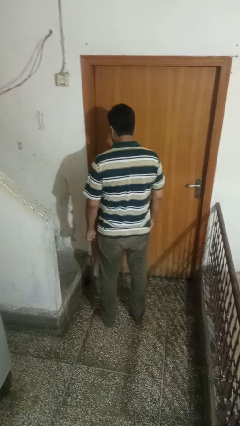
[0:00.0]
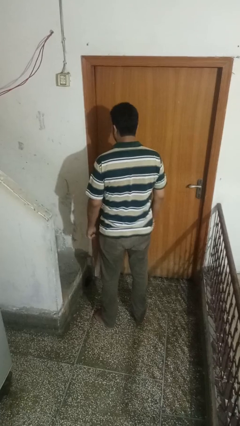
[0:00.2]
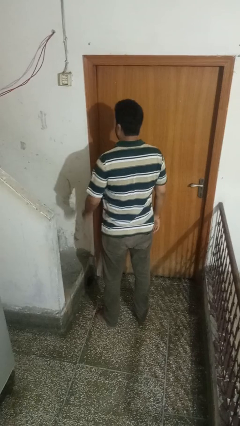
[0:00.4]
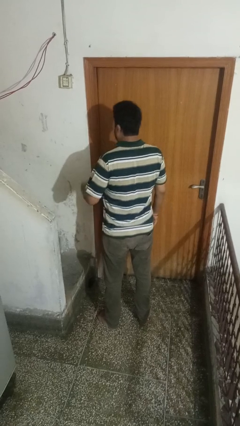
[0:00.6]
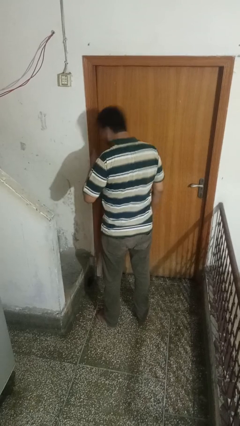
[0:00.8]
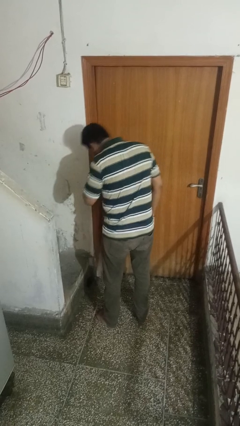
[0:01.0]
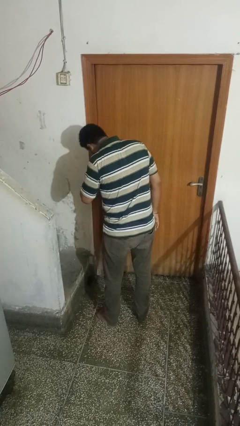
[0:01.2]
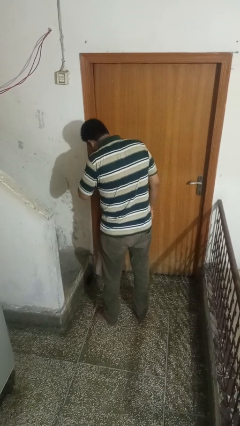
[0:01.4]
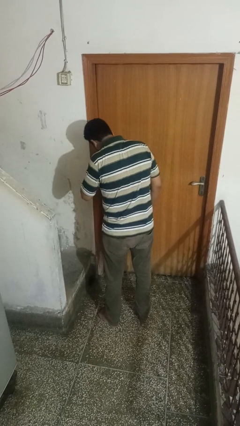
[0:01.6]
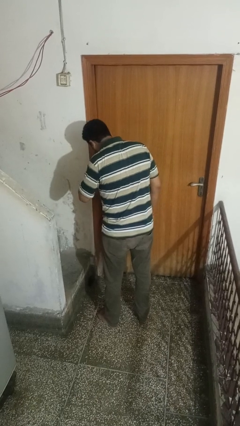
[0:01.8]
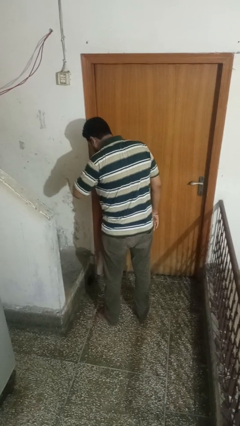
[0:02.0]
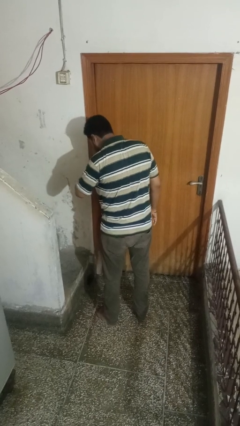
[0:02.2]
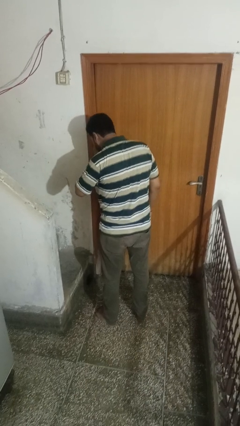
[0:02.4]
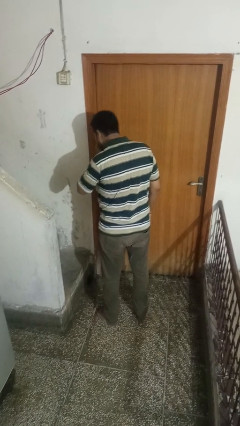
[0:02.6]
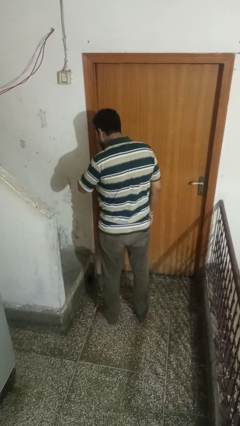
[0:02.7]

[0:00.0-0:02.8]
person sneezes into hand

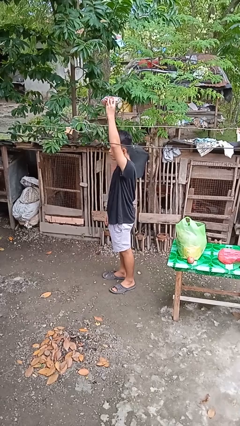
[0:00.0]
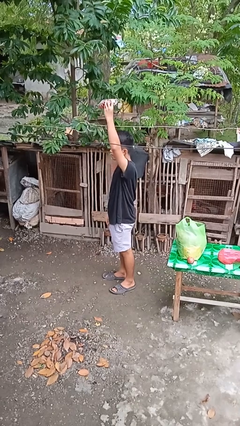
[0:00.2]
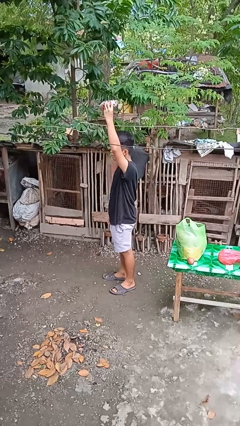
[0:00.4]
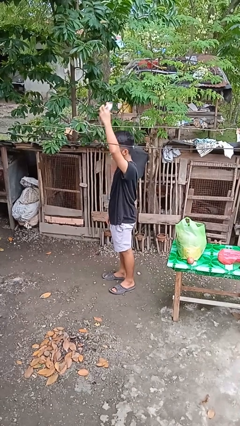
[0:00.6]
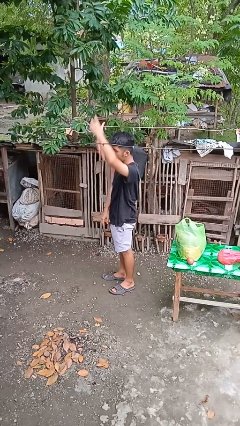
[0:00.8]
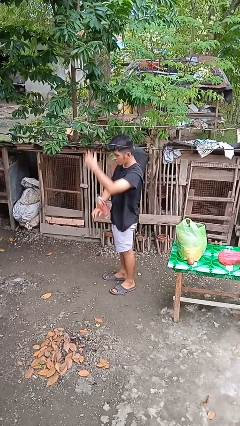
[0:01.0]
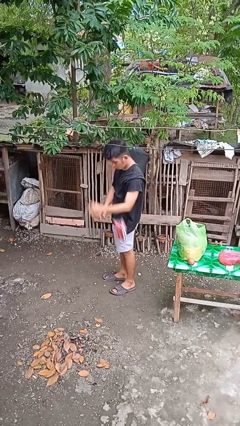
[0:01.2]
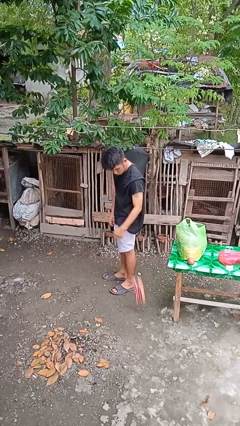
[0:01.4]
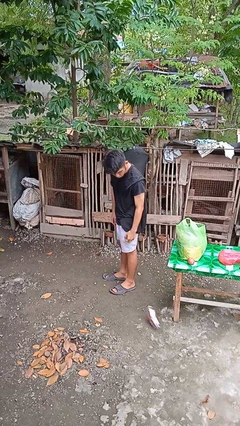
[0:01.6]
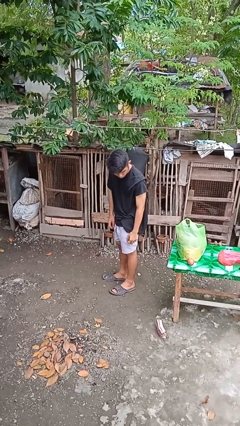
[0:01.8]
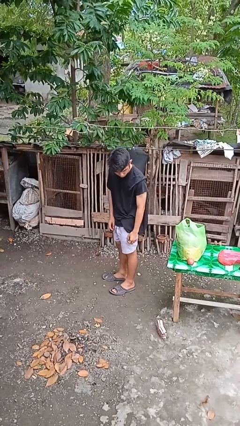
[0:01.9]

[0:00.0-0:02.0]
person drops object

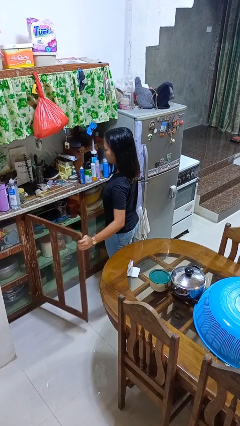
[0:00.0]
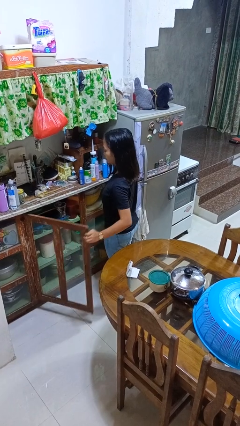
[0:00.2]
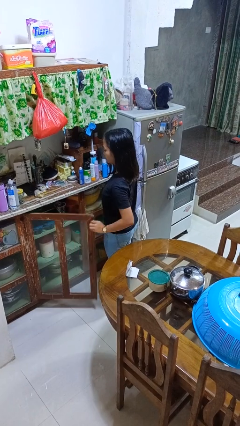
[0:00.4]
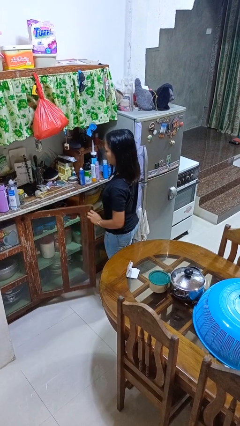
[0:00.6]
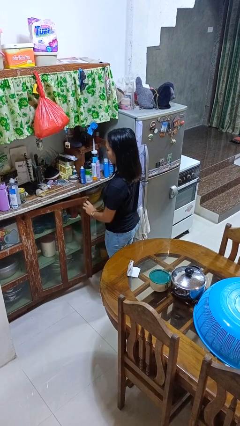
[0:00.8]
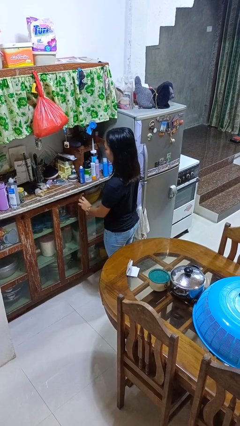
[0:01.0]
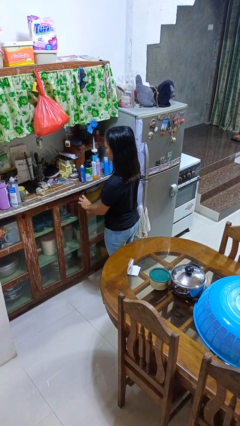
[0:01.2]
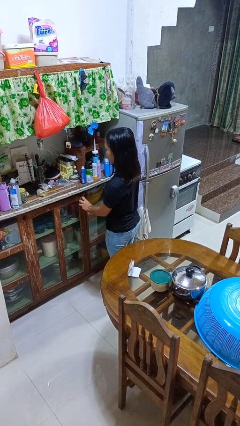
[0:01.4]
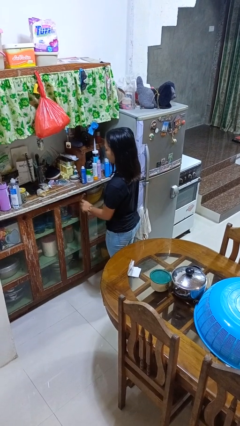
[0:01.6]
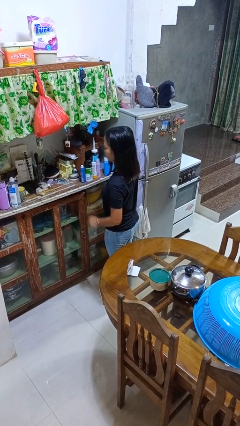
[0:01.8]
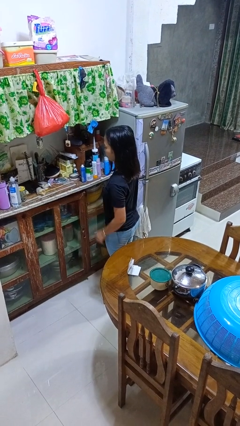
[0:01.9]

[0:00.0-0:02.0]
person closes cabinet

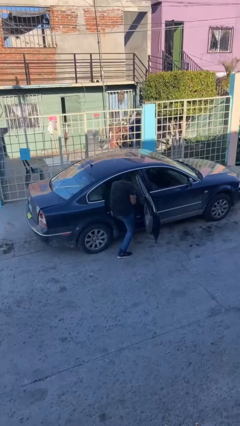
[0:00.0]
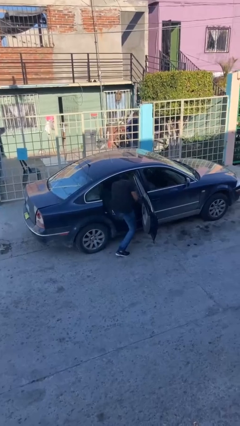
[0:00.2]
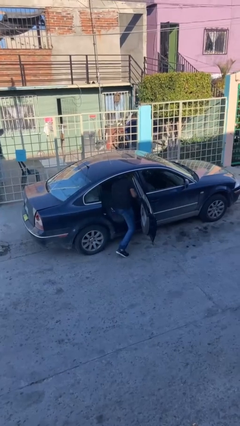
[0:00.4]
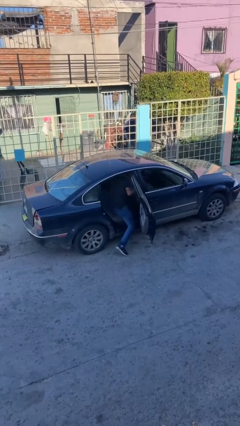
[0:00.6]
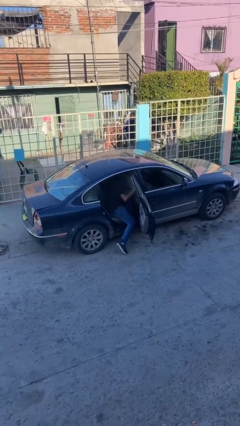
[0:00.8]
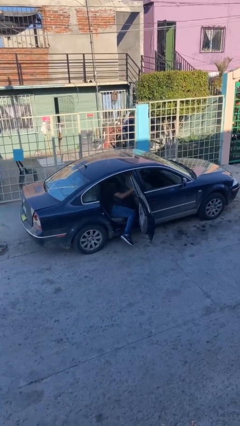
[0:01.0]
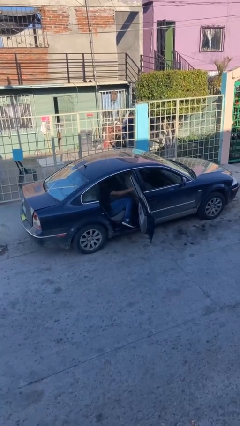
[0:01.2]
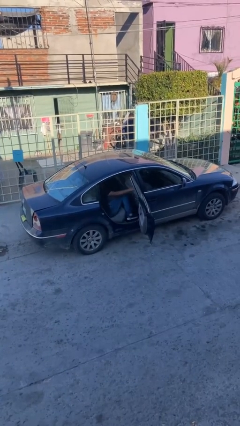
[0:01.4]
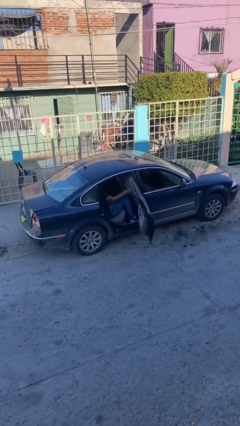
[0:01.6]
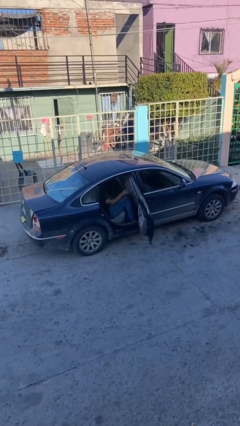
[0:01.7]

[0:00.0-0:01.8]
person enters car

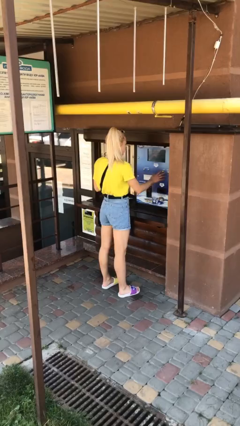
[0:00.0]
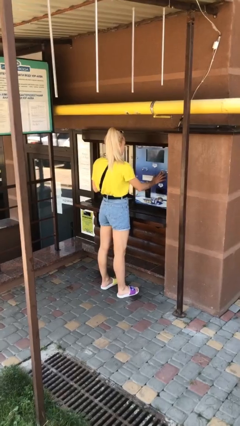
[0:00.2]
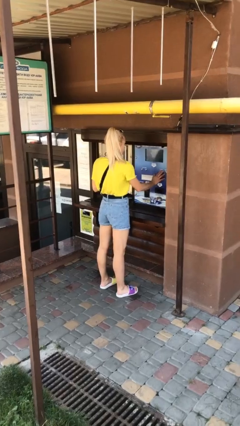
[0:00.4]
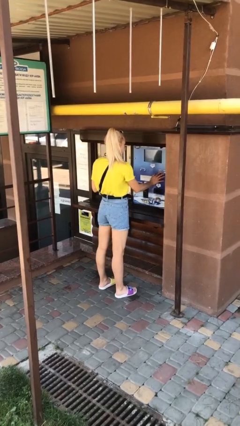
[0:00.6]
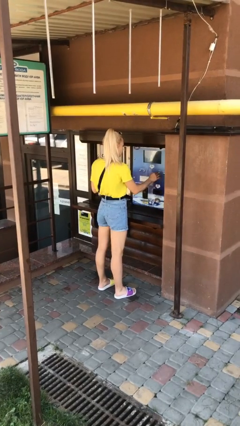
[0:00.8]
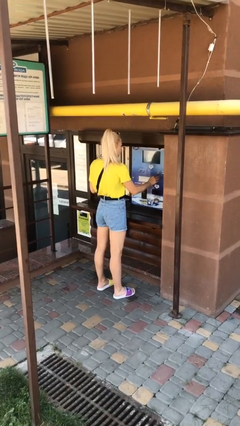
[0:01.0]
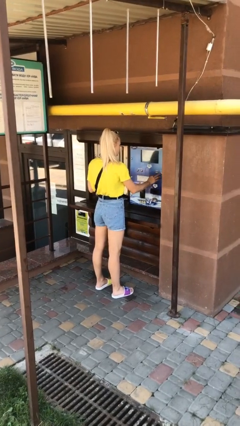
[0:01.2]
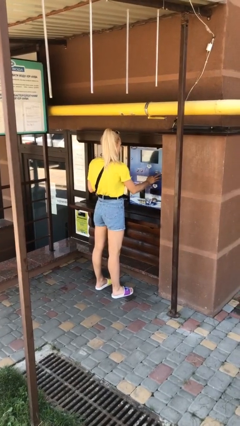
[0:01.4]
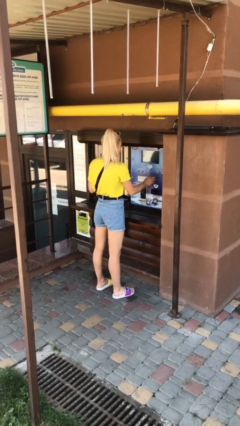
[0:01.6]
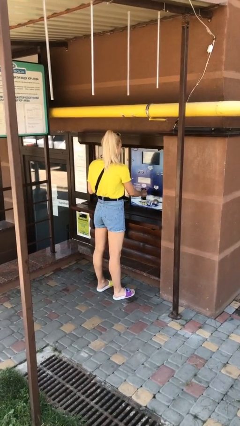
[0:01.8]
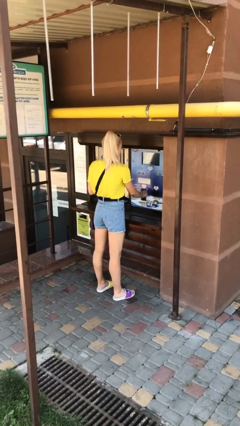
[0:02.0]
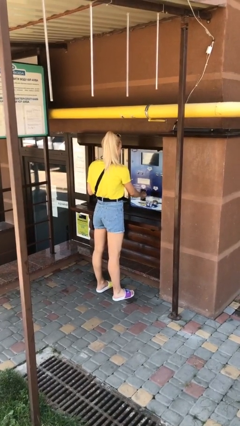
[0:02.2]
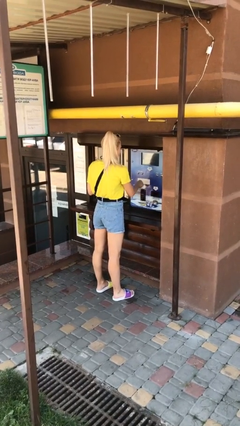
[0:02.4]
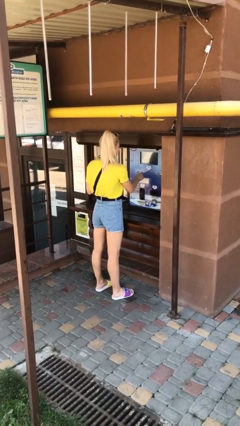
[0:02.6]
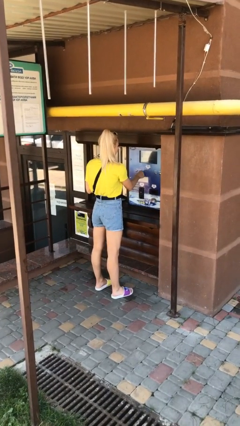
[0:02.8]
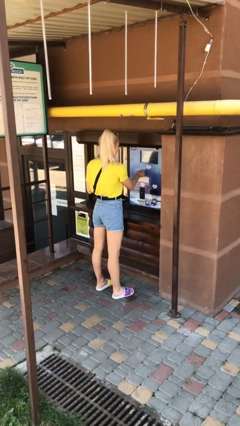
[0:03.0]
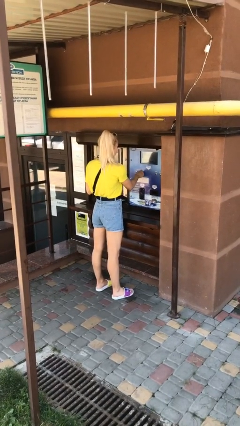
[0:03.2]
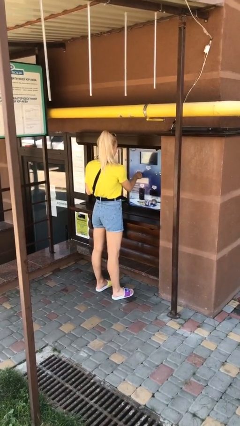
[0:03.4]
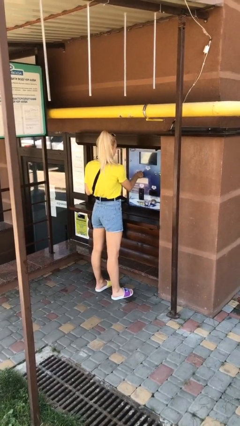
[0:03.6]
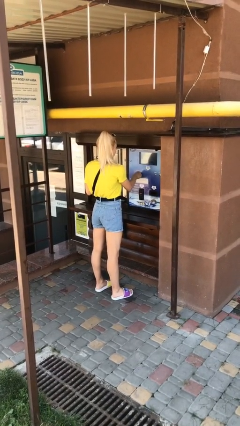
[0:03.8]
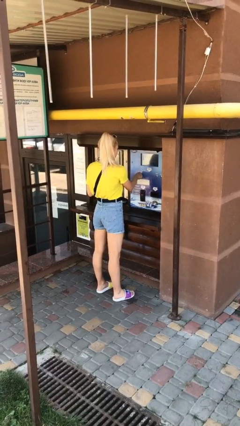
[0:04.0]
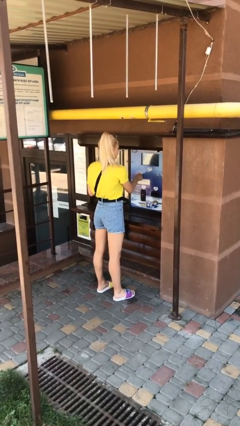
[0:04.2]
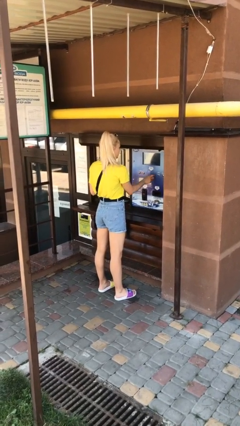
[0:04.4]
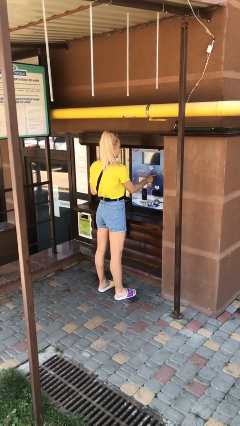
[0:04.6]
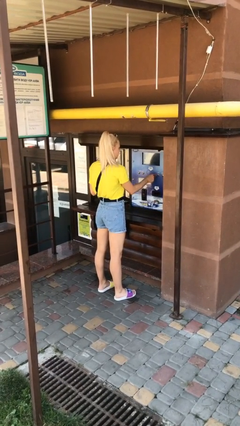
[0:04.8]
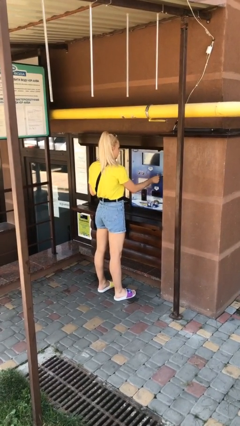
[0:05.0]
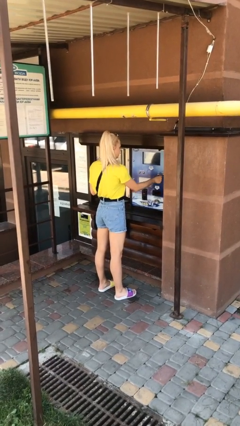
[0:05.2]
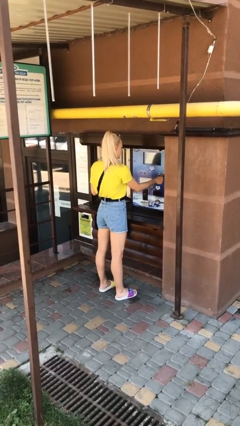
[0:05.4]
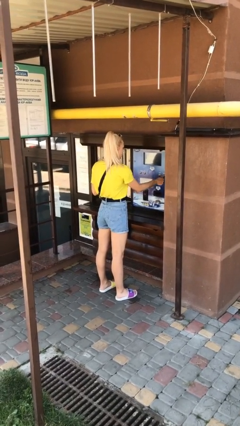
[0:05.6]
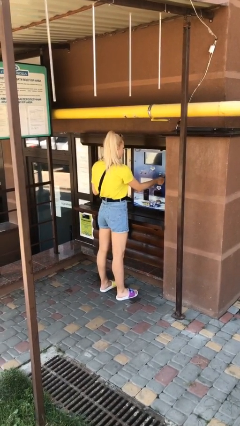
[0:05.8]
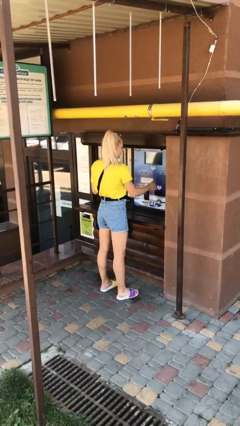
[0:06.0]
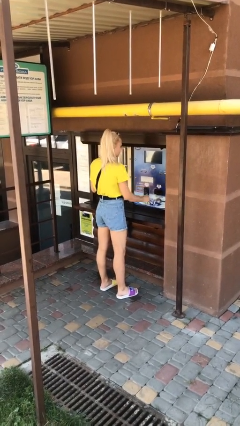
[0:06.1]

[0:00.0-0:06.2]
person purchases from machine

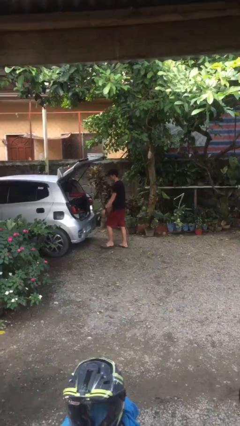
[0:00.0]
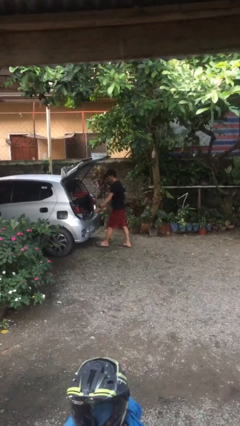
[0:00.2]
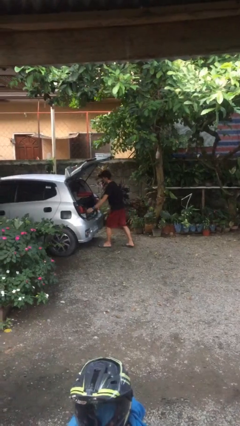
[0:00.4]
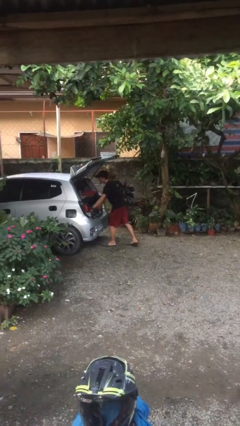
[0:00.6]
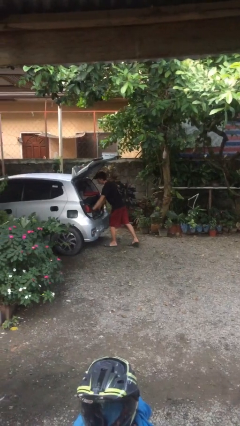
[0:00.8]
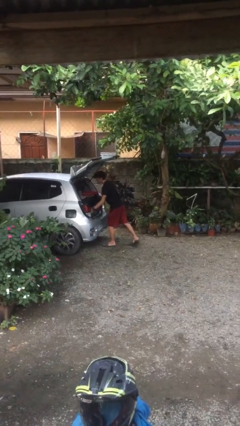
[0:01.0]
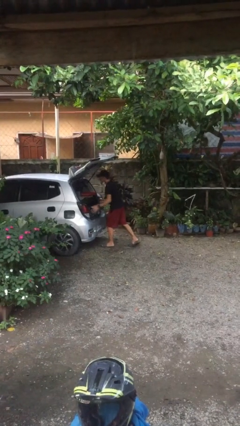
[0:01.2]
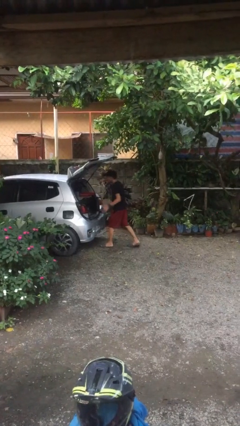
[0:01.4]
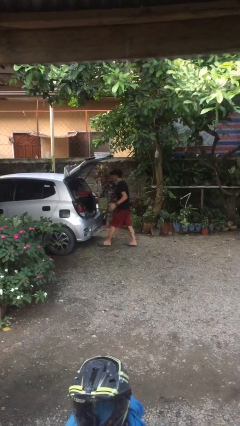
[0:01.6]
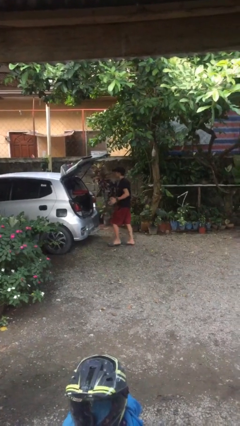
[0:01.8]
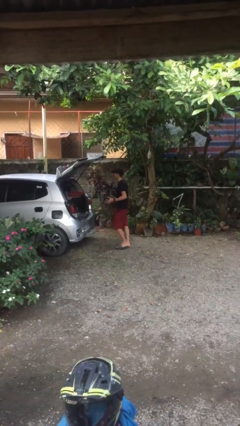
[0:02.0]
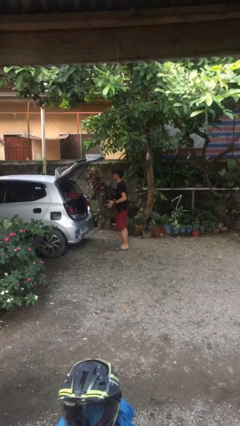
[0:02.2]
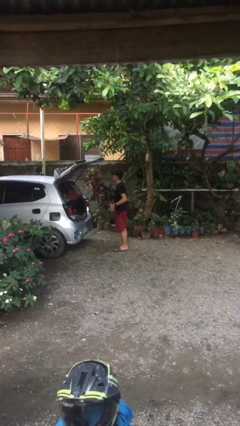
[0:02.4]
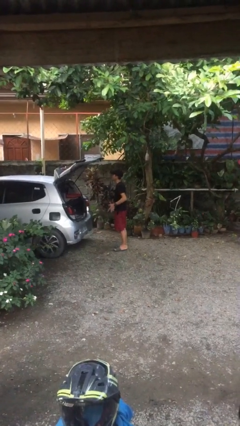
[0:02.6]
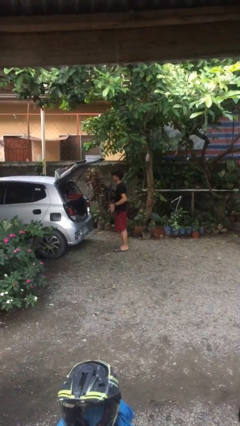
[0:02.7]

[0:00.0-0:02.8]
person unloads car
